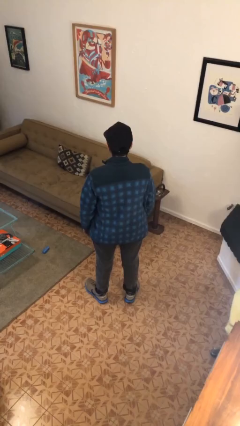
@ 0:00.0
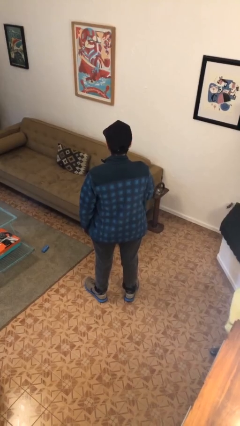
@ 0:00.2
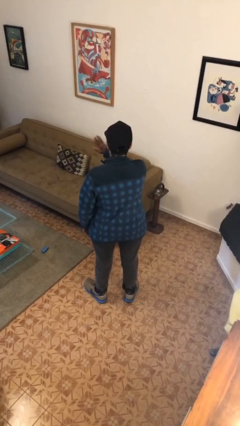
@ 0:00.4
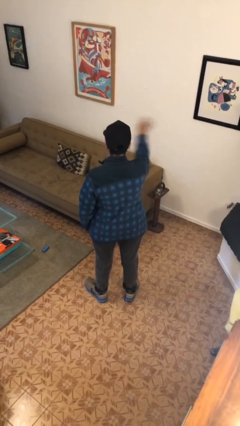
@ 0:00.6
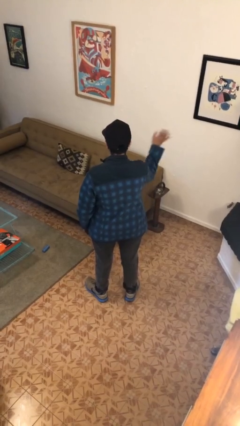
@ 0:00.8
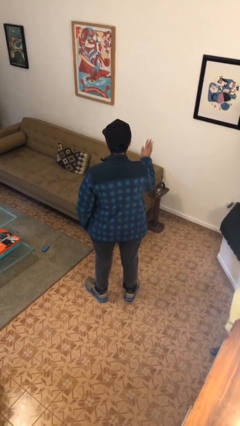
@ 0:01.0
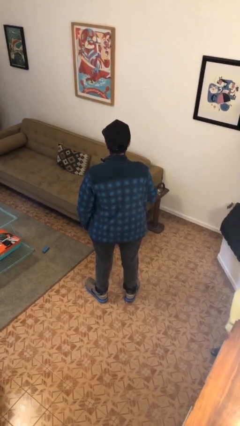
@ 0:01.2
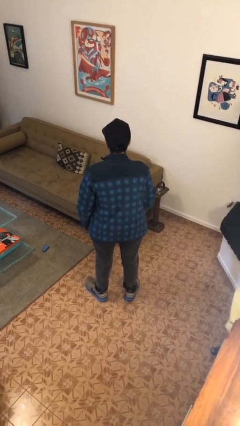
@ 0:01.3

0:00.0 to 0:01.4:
person gestures swipe right

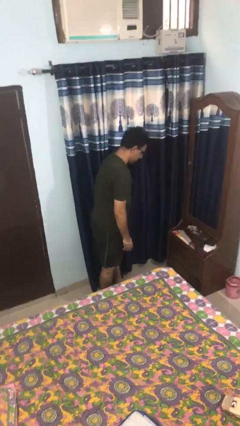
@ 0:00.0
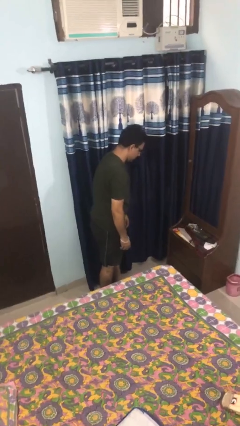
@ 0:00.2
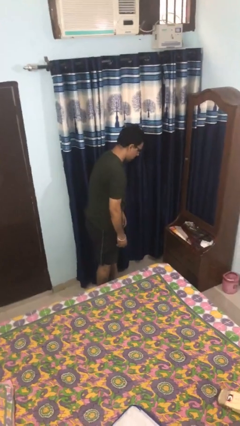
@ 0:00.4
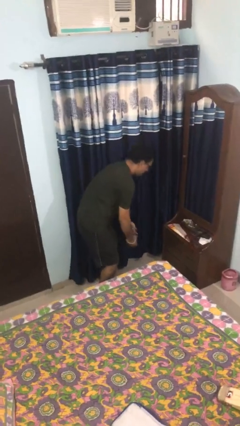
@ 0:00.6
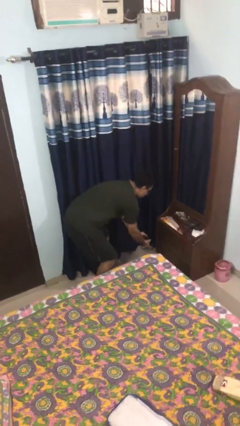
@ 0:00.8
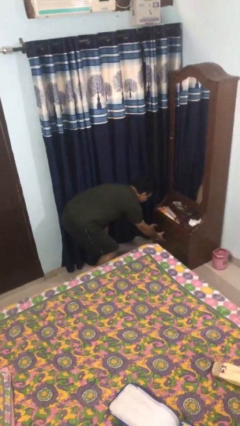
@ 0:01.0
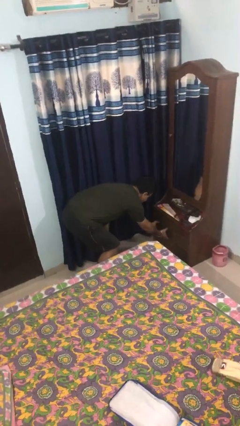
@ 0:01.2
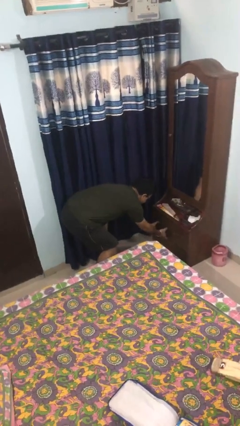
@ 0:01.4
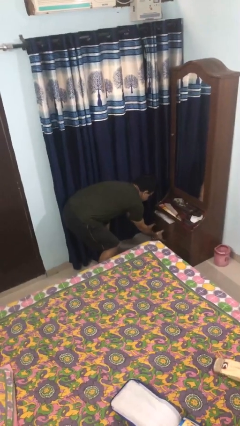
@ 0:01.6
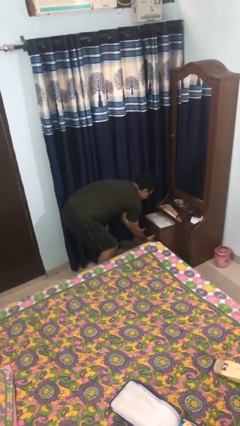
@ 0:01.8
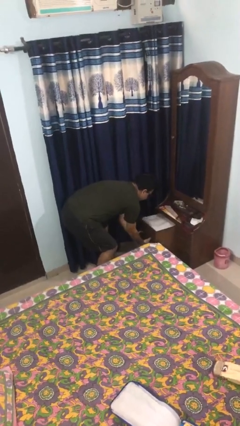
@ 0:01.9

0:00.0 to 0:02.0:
person opens dresser drawer

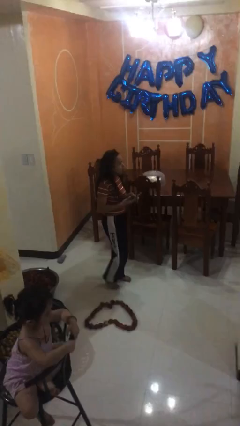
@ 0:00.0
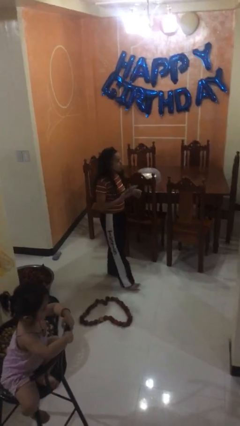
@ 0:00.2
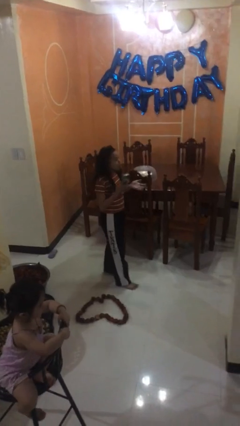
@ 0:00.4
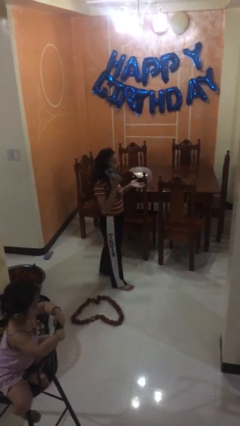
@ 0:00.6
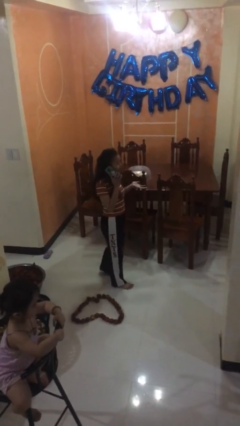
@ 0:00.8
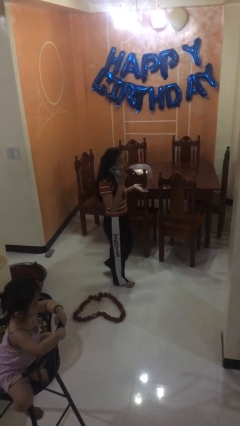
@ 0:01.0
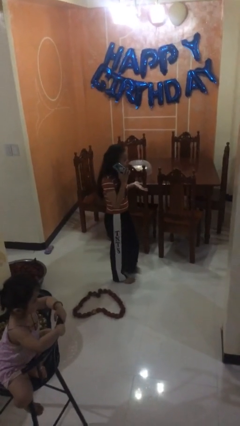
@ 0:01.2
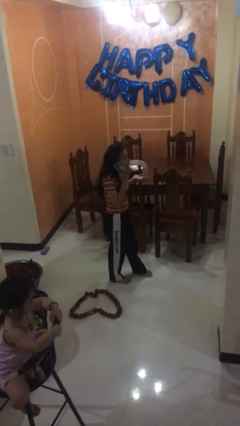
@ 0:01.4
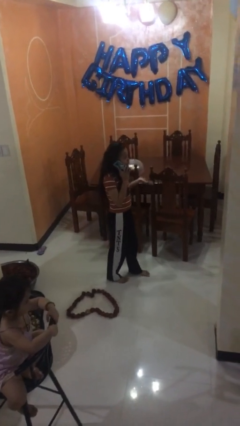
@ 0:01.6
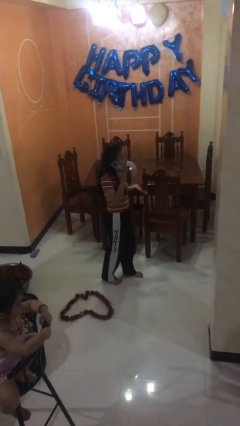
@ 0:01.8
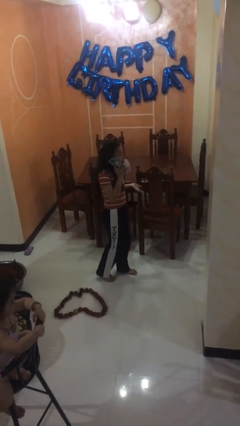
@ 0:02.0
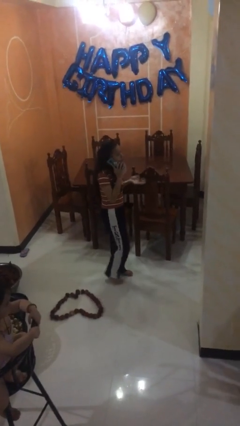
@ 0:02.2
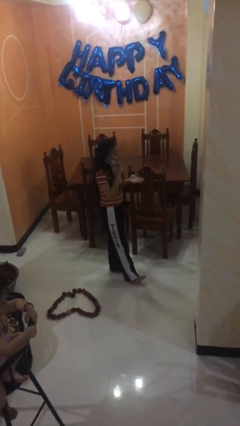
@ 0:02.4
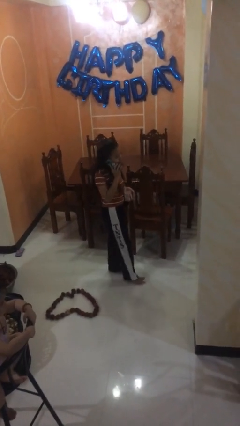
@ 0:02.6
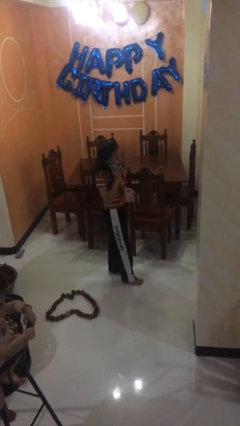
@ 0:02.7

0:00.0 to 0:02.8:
person talks on phone

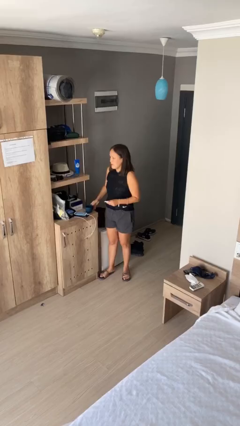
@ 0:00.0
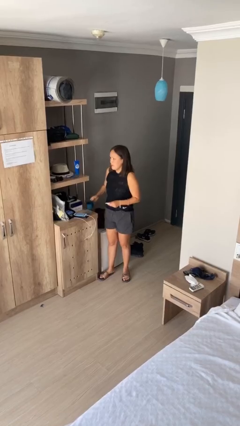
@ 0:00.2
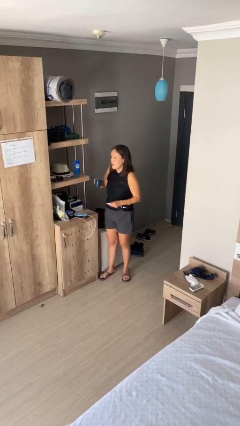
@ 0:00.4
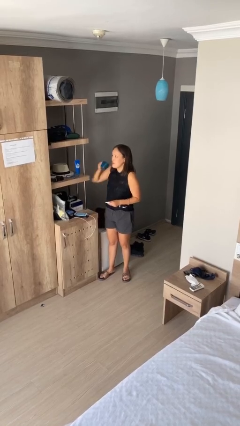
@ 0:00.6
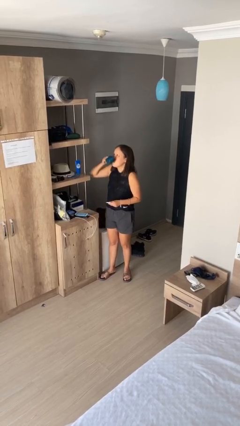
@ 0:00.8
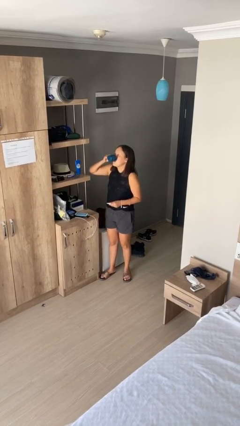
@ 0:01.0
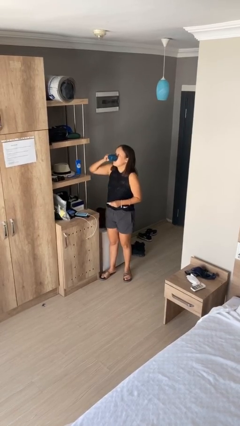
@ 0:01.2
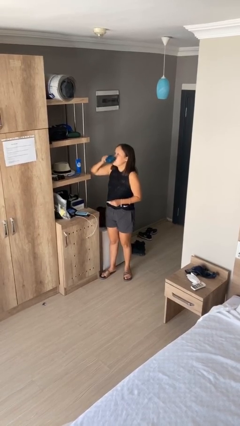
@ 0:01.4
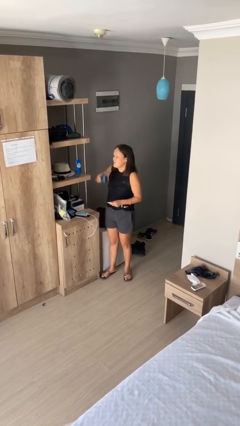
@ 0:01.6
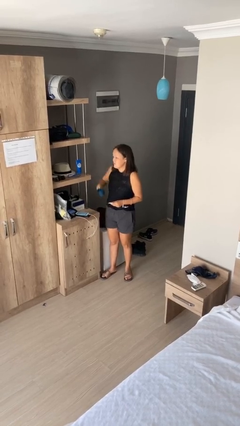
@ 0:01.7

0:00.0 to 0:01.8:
person drinks from cup

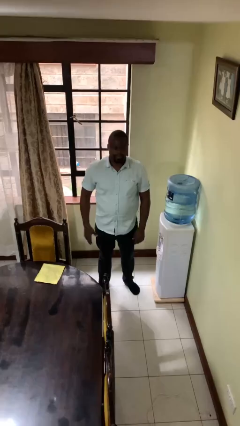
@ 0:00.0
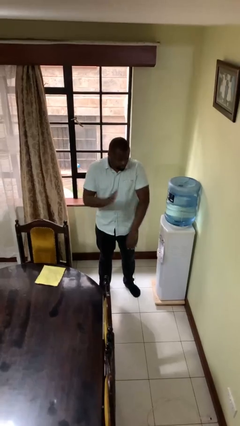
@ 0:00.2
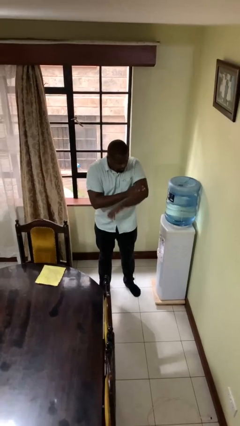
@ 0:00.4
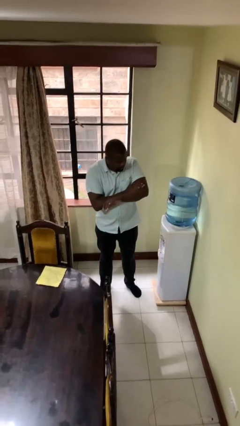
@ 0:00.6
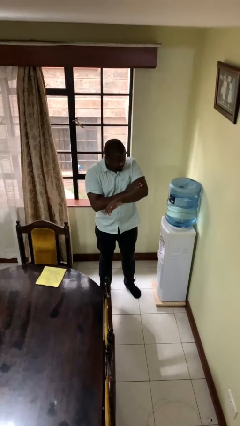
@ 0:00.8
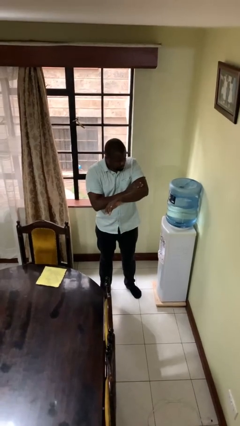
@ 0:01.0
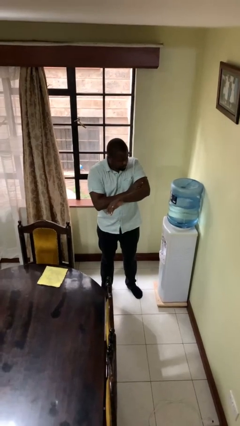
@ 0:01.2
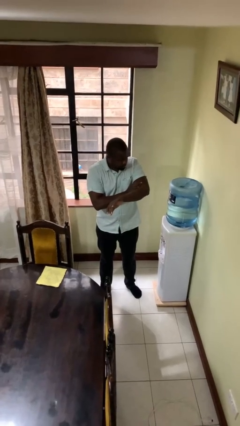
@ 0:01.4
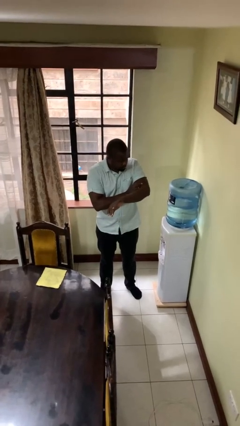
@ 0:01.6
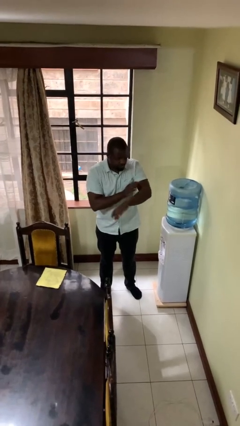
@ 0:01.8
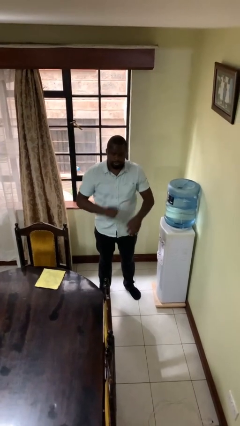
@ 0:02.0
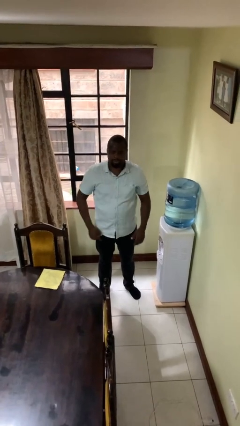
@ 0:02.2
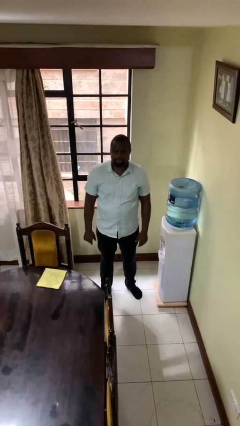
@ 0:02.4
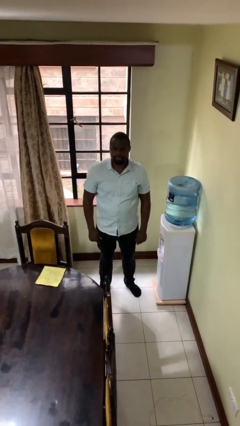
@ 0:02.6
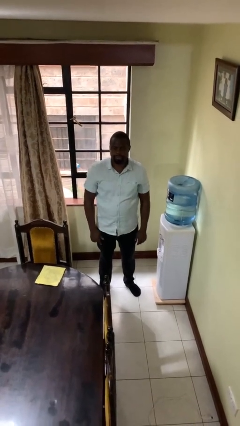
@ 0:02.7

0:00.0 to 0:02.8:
person swats bug

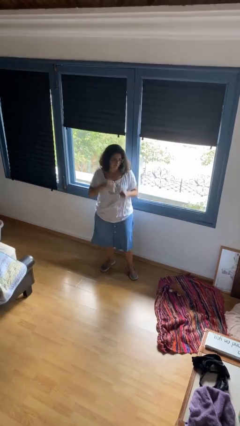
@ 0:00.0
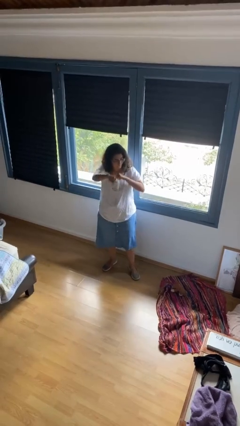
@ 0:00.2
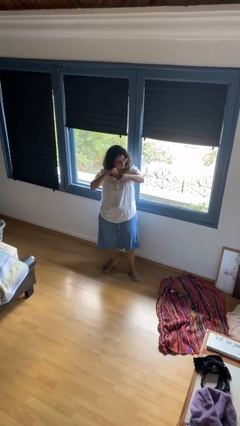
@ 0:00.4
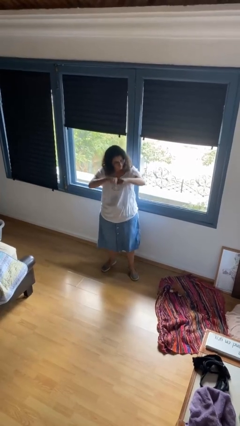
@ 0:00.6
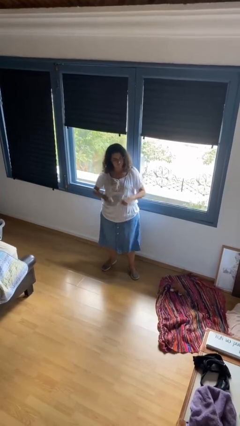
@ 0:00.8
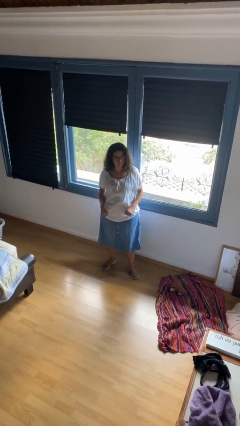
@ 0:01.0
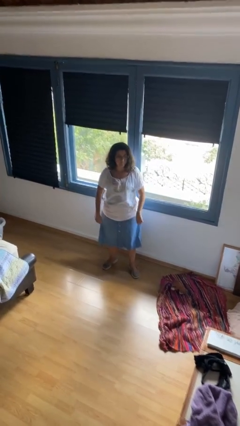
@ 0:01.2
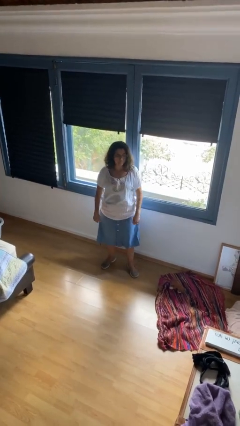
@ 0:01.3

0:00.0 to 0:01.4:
person punches

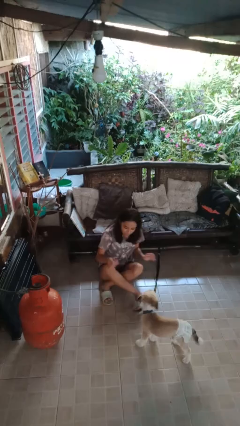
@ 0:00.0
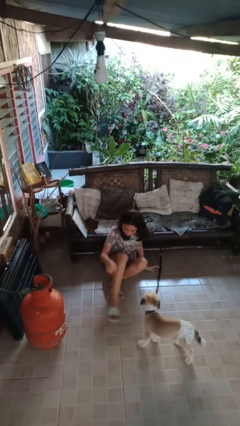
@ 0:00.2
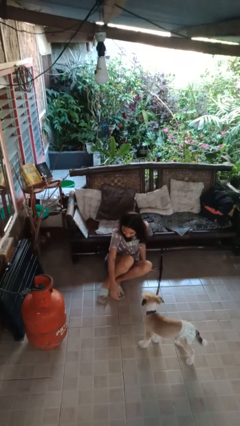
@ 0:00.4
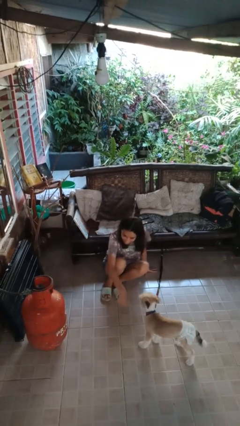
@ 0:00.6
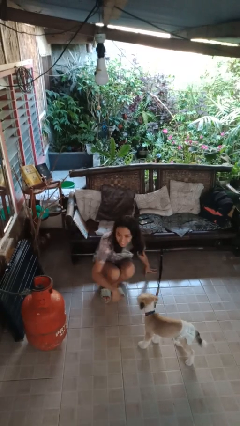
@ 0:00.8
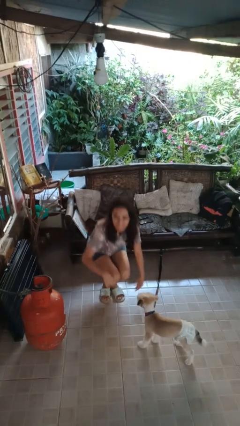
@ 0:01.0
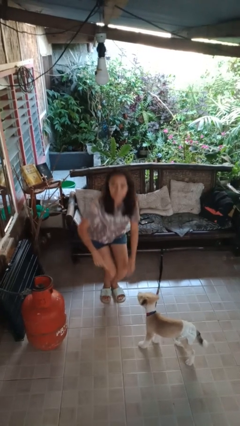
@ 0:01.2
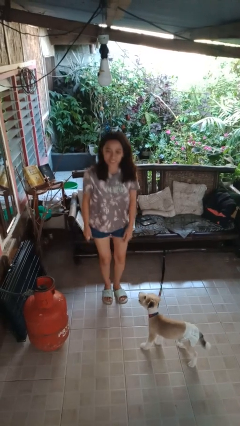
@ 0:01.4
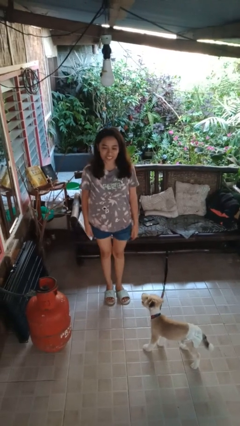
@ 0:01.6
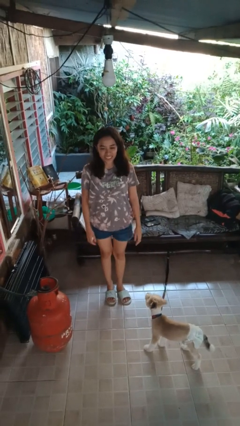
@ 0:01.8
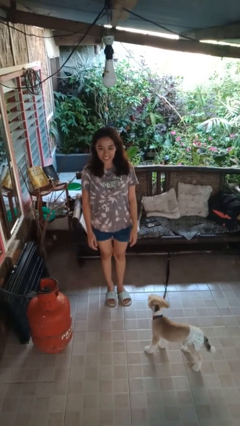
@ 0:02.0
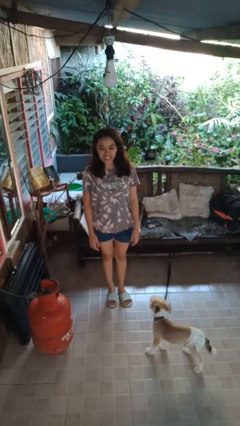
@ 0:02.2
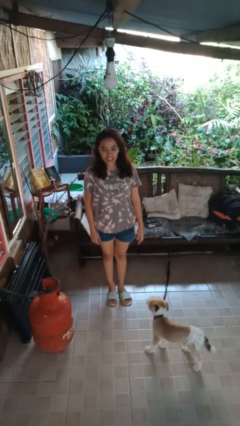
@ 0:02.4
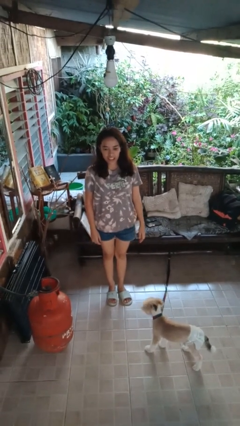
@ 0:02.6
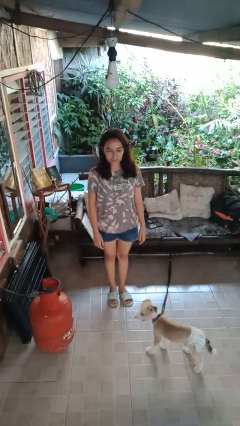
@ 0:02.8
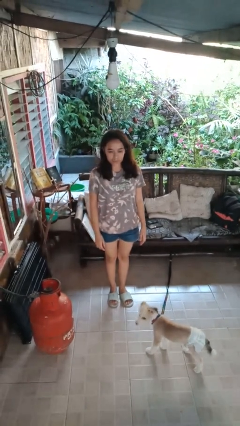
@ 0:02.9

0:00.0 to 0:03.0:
person stands up from floor

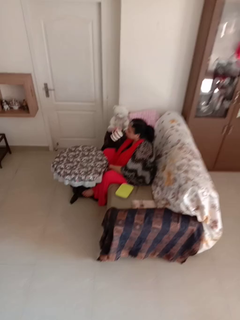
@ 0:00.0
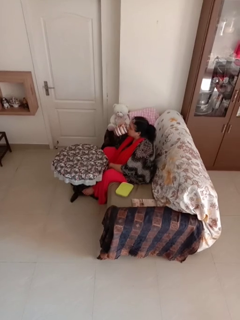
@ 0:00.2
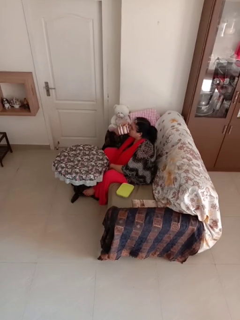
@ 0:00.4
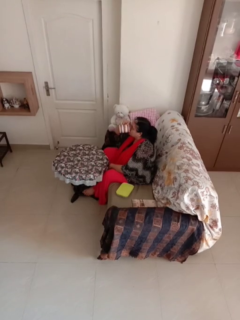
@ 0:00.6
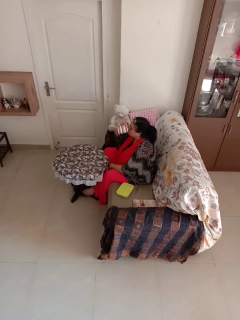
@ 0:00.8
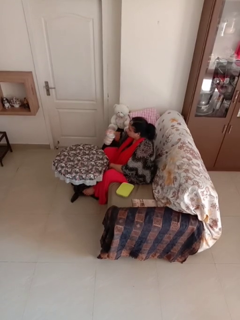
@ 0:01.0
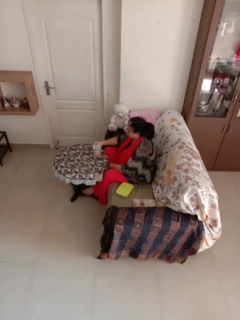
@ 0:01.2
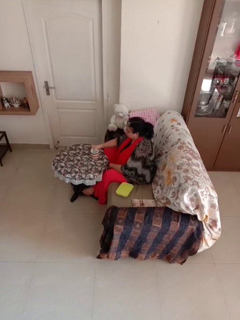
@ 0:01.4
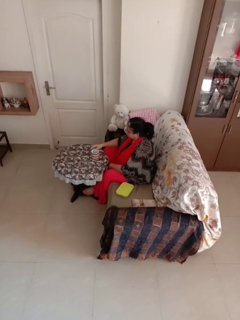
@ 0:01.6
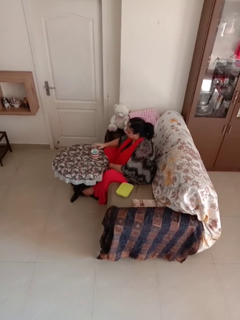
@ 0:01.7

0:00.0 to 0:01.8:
person drinks from mug

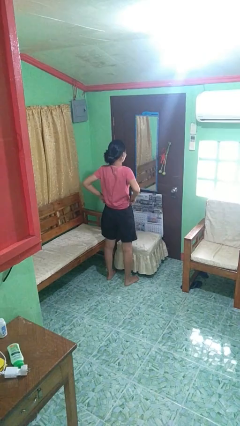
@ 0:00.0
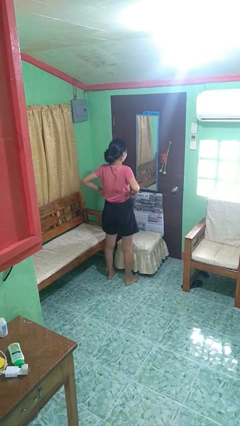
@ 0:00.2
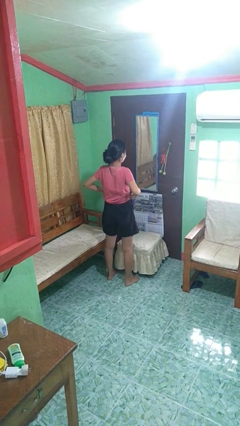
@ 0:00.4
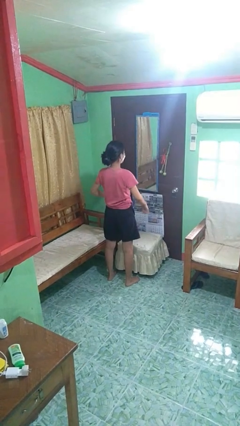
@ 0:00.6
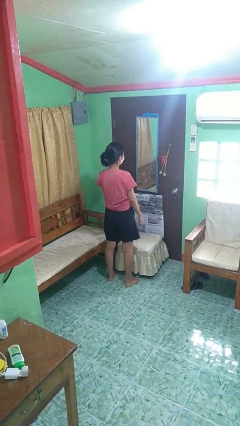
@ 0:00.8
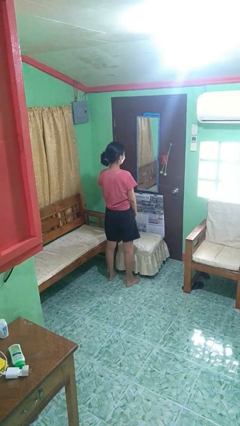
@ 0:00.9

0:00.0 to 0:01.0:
person hikes up pants
